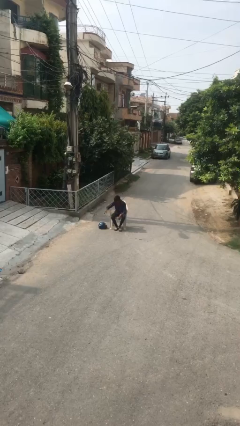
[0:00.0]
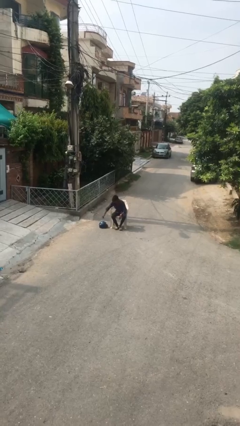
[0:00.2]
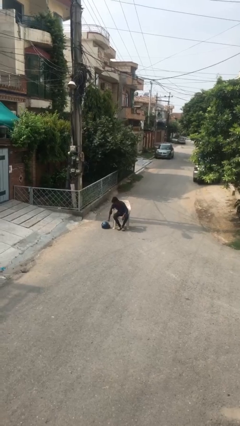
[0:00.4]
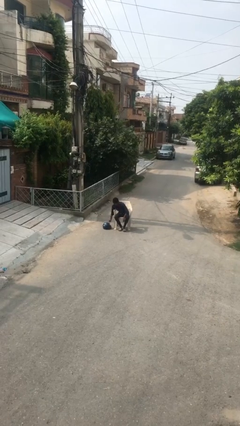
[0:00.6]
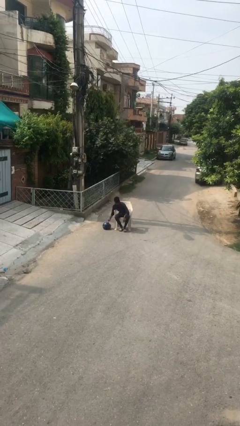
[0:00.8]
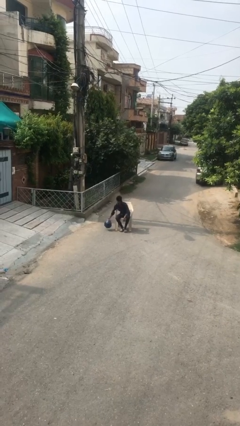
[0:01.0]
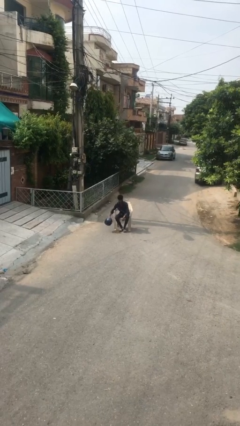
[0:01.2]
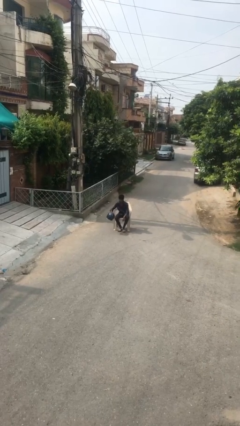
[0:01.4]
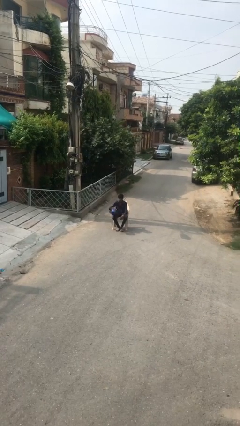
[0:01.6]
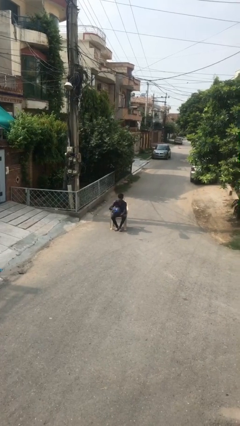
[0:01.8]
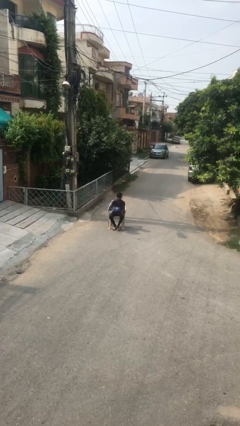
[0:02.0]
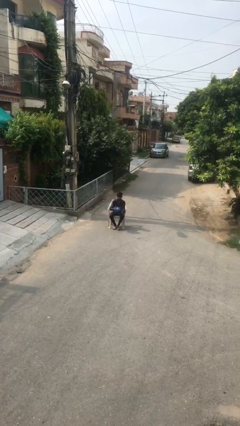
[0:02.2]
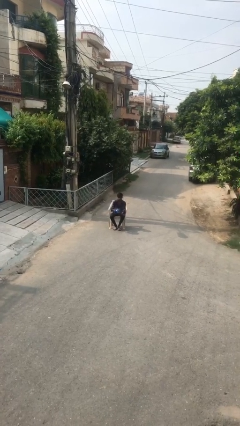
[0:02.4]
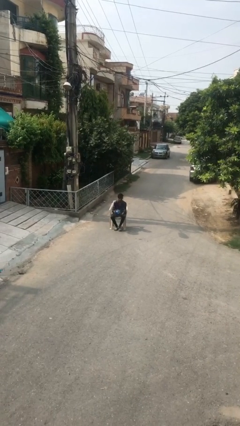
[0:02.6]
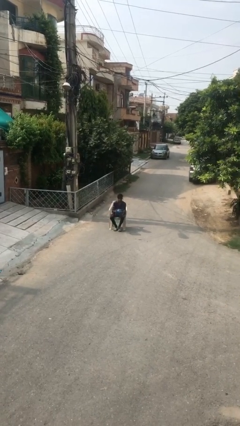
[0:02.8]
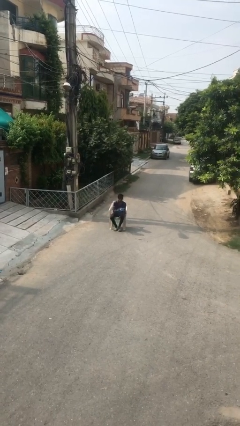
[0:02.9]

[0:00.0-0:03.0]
person picks up object from floor

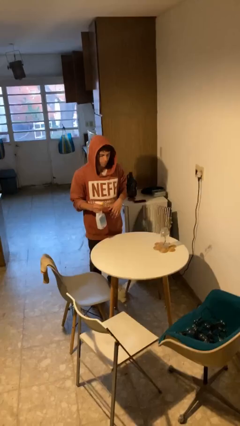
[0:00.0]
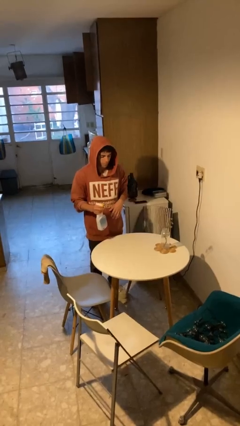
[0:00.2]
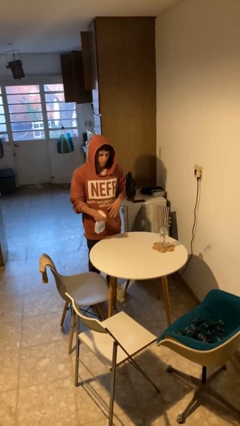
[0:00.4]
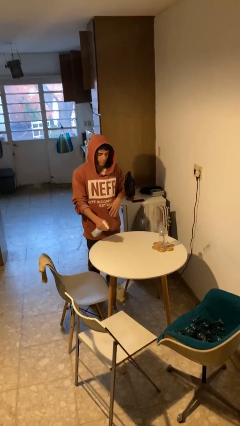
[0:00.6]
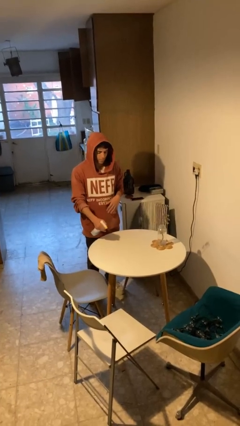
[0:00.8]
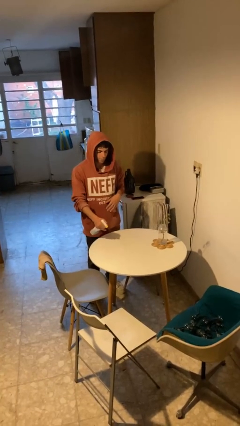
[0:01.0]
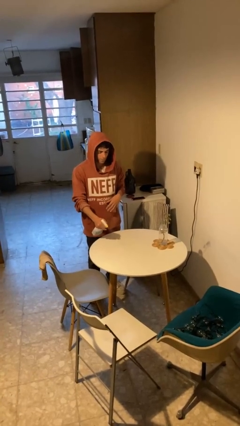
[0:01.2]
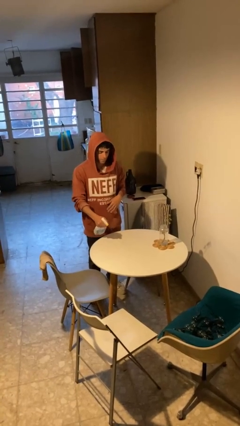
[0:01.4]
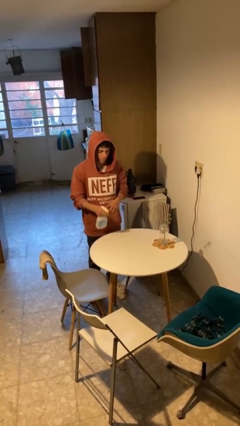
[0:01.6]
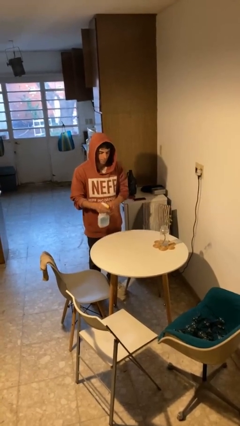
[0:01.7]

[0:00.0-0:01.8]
person sprays from bottle

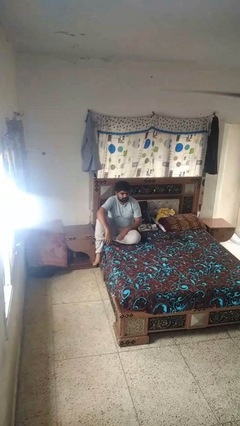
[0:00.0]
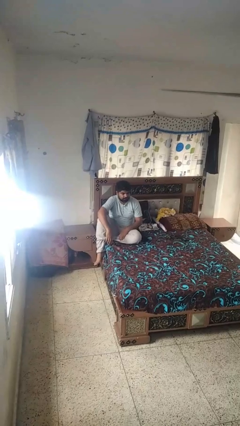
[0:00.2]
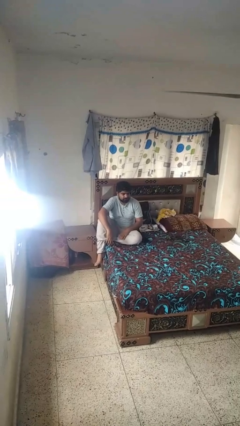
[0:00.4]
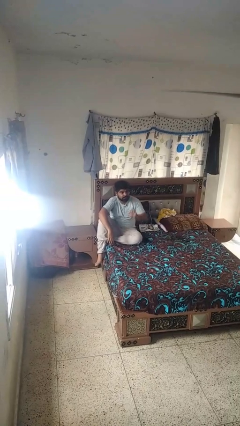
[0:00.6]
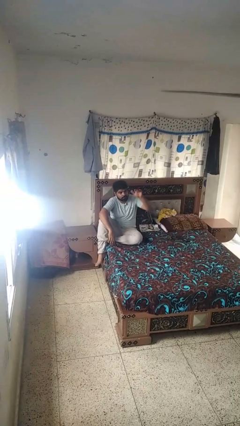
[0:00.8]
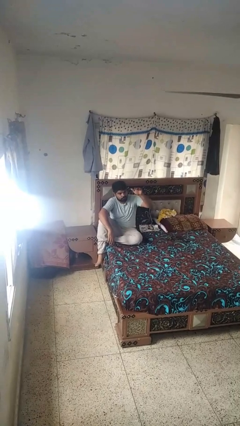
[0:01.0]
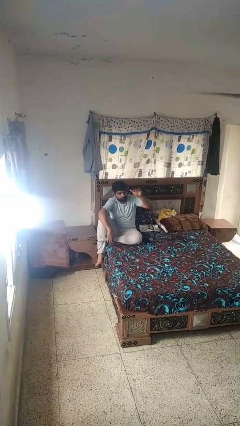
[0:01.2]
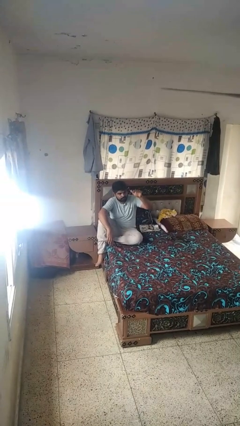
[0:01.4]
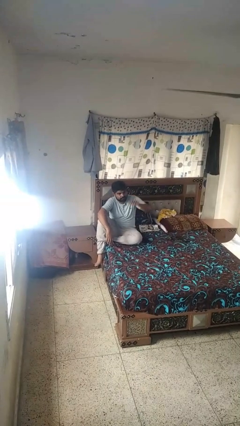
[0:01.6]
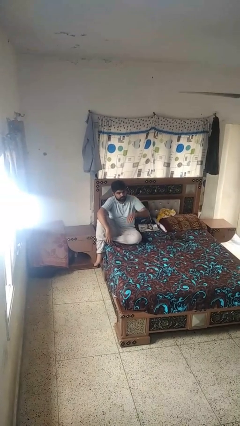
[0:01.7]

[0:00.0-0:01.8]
person gestures come here

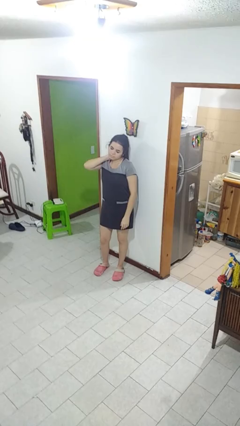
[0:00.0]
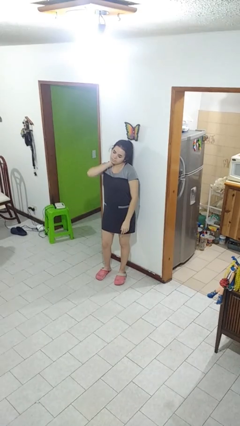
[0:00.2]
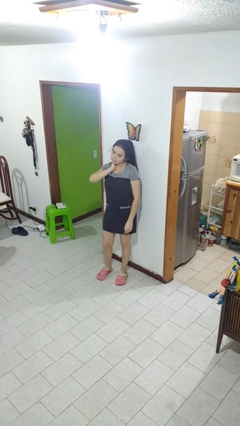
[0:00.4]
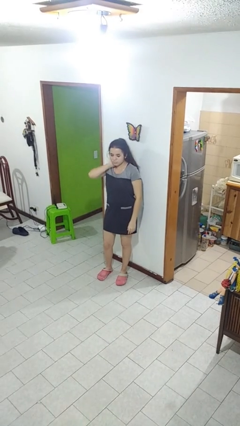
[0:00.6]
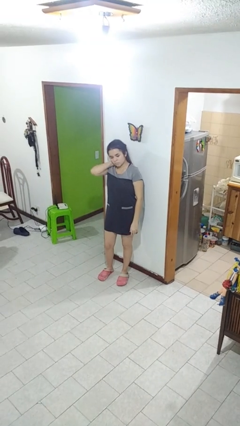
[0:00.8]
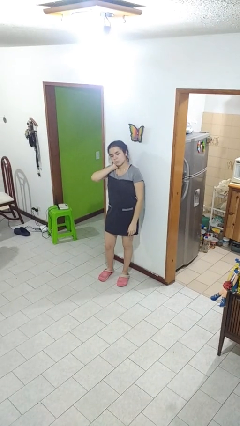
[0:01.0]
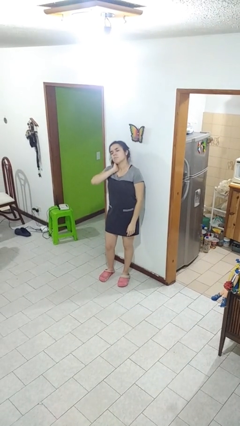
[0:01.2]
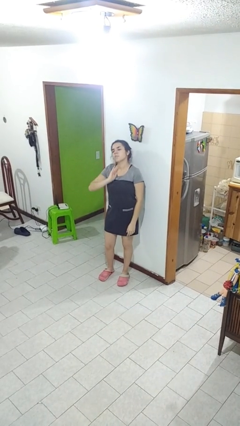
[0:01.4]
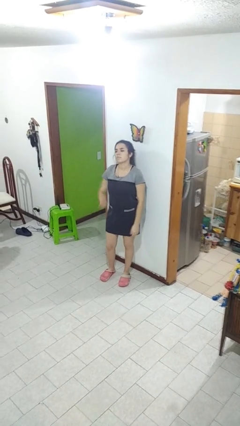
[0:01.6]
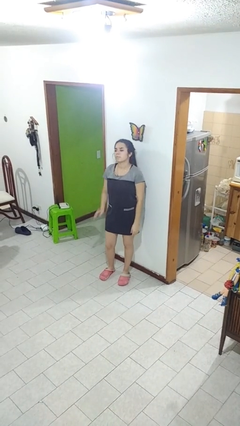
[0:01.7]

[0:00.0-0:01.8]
person rubs neck

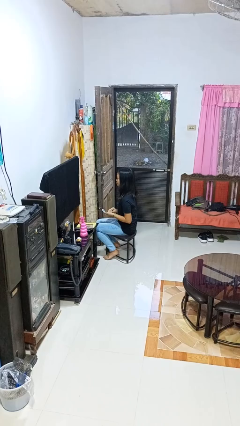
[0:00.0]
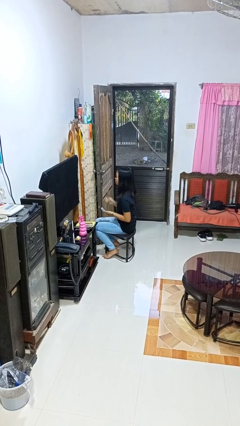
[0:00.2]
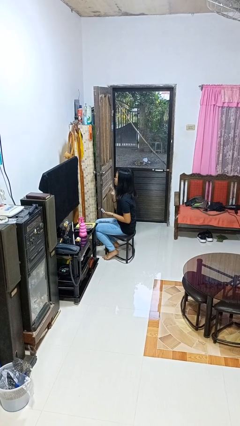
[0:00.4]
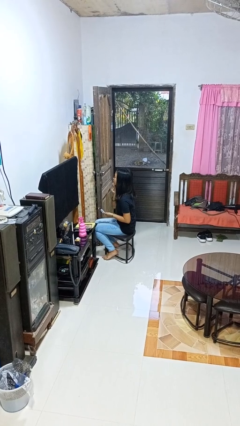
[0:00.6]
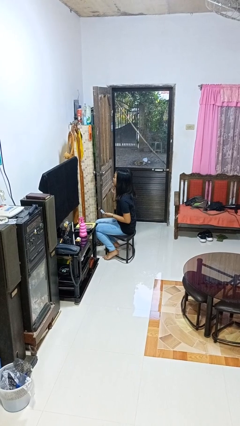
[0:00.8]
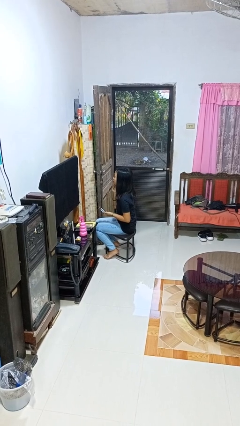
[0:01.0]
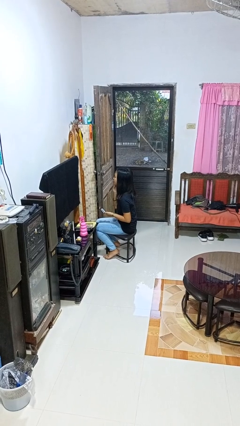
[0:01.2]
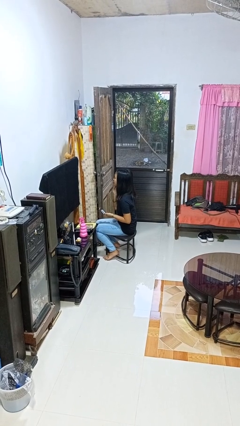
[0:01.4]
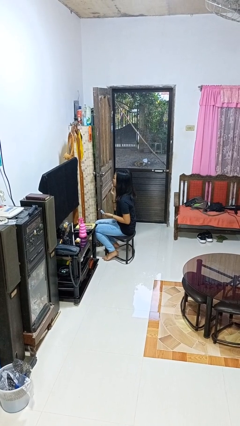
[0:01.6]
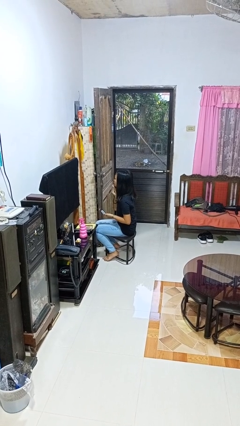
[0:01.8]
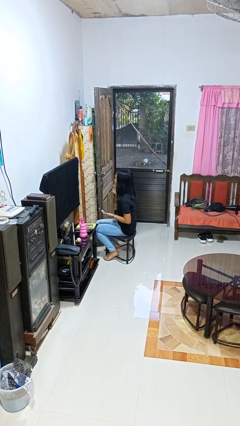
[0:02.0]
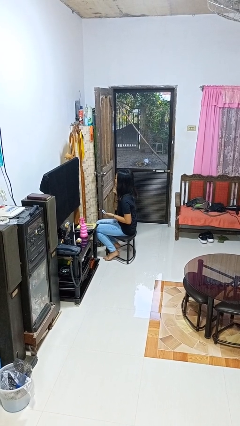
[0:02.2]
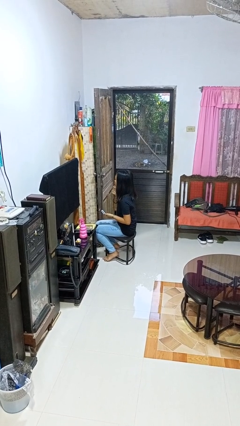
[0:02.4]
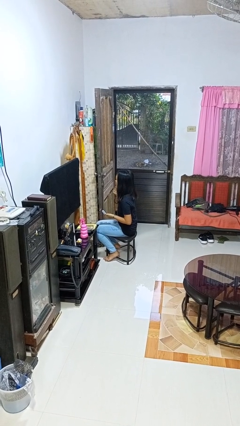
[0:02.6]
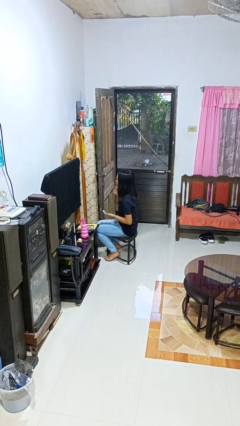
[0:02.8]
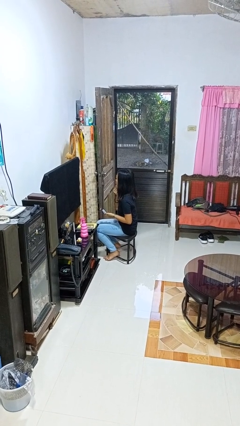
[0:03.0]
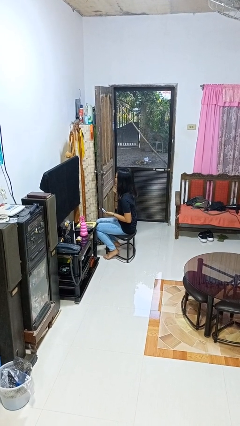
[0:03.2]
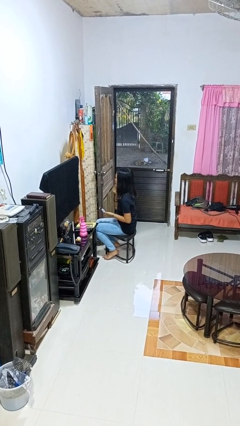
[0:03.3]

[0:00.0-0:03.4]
person applies foundation makeup

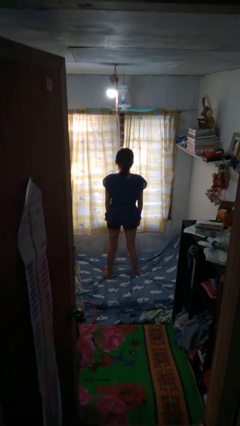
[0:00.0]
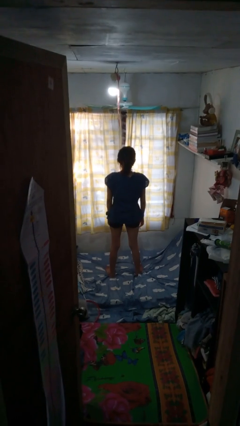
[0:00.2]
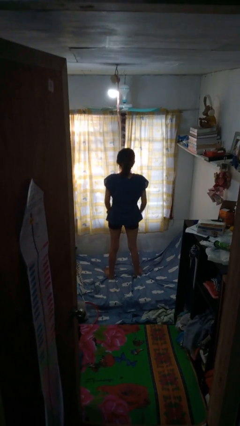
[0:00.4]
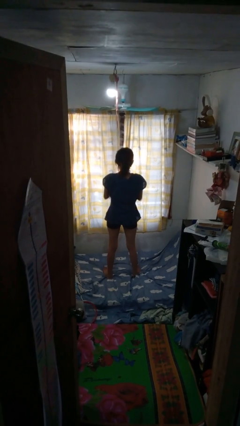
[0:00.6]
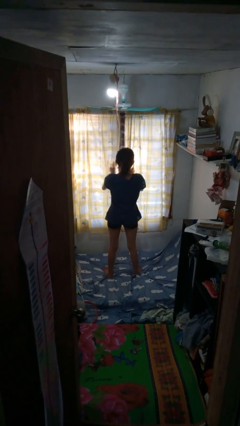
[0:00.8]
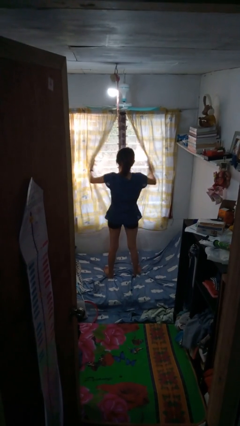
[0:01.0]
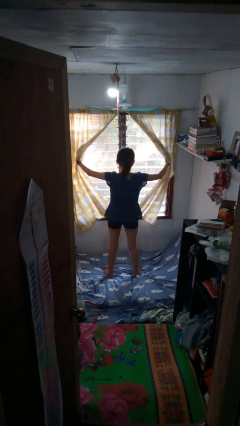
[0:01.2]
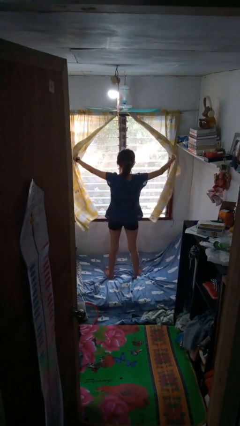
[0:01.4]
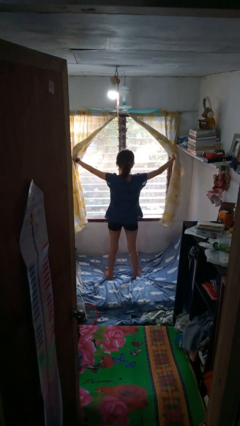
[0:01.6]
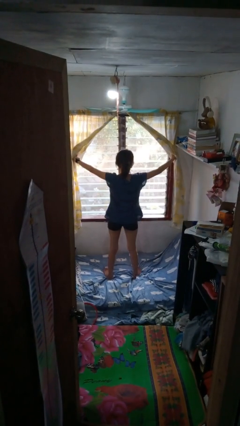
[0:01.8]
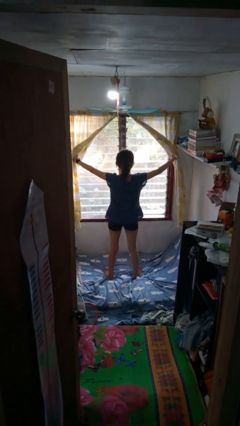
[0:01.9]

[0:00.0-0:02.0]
person opens curtains

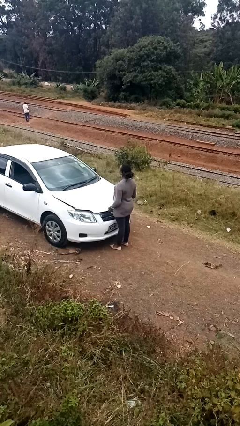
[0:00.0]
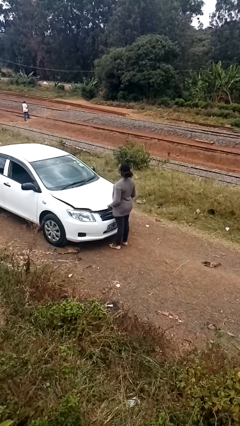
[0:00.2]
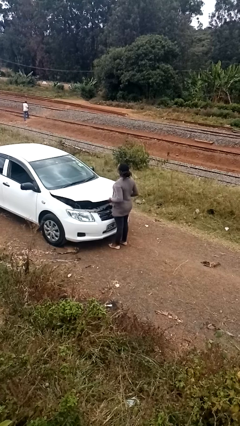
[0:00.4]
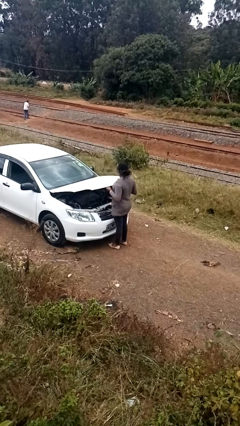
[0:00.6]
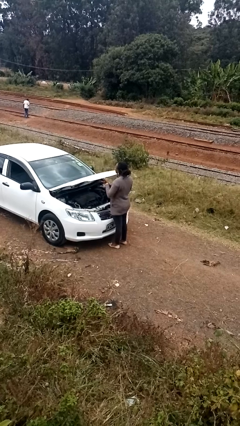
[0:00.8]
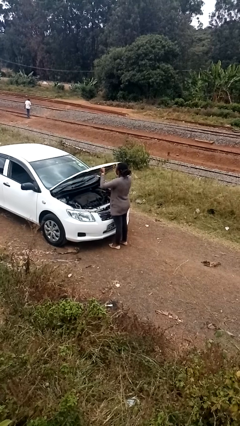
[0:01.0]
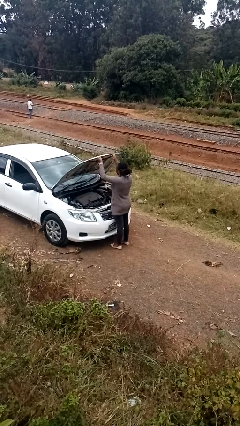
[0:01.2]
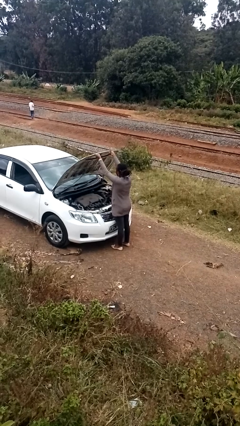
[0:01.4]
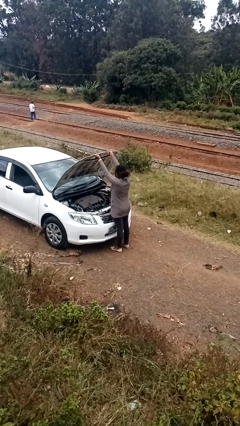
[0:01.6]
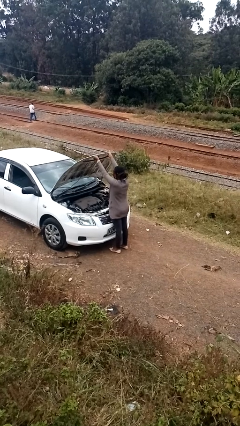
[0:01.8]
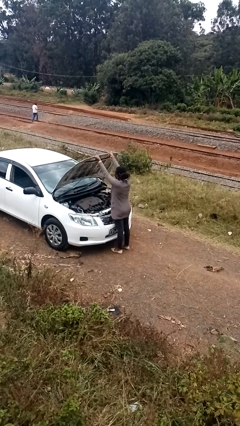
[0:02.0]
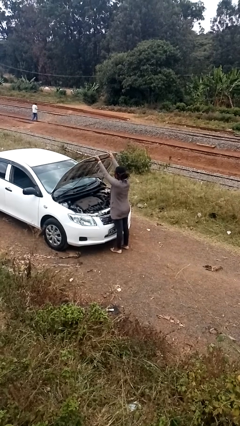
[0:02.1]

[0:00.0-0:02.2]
person opens car hood

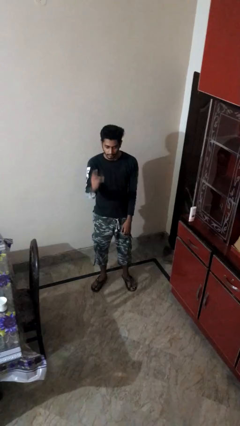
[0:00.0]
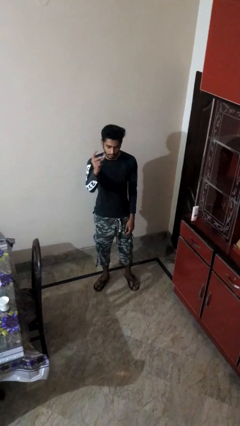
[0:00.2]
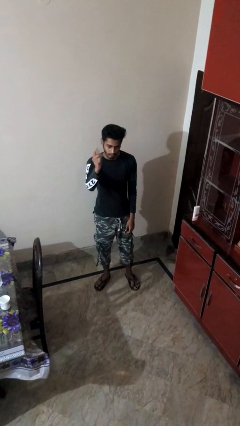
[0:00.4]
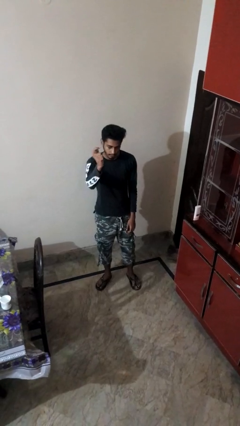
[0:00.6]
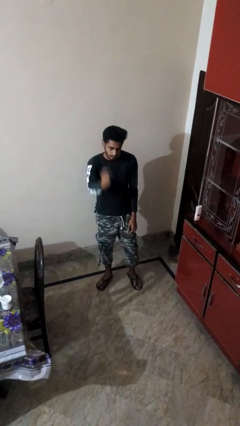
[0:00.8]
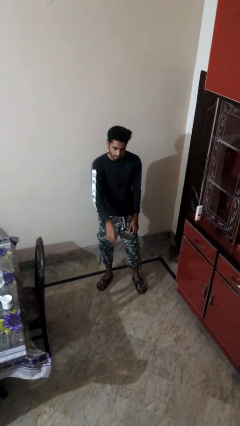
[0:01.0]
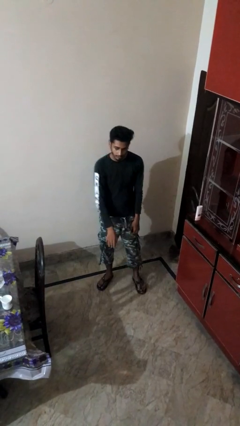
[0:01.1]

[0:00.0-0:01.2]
person snaps fingers
